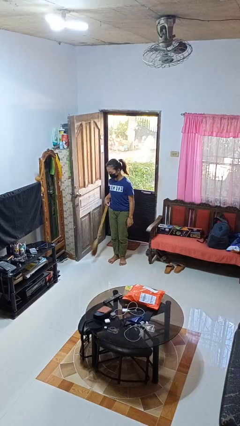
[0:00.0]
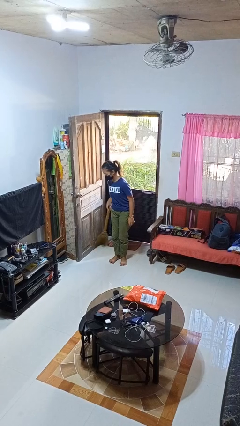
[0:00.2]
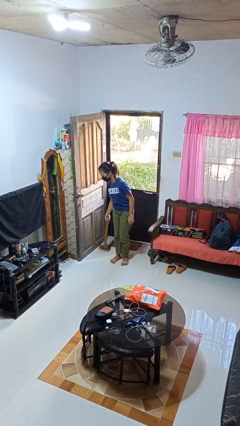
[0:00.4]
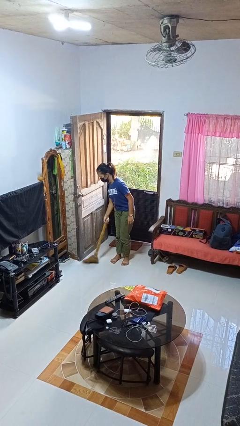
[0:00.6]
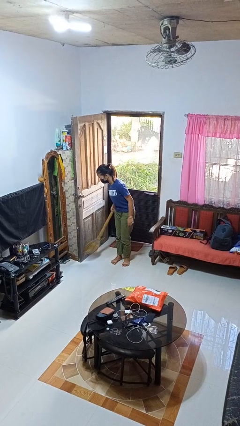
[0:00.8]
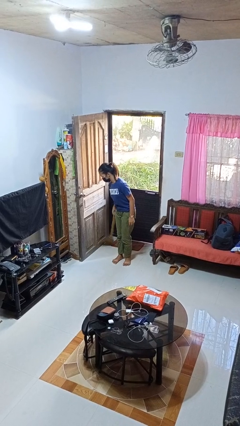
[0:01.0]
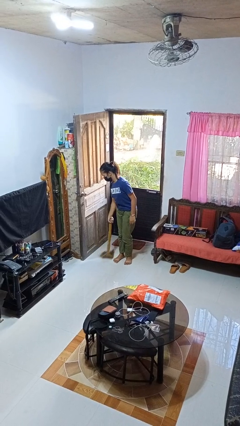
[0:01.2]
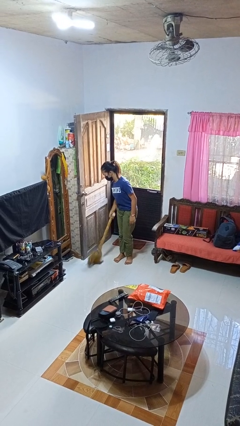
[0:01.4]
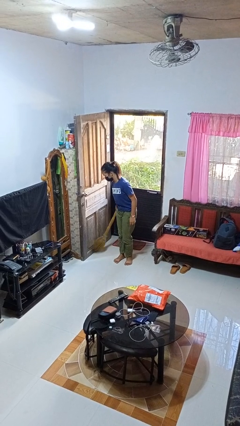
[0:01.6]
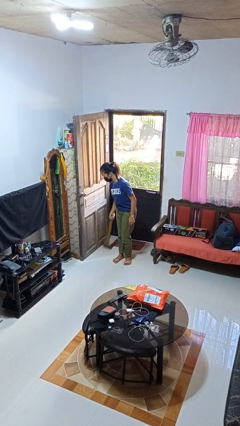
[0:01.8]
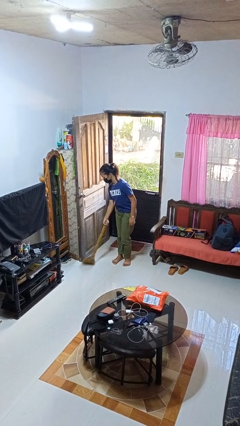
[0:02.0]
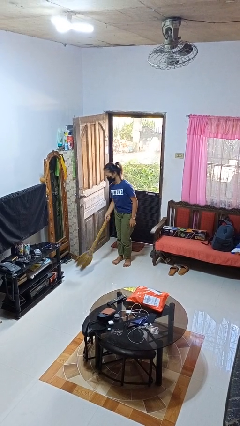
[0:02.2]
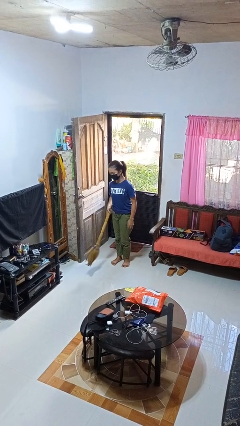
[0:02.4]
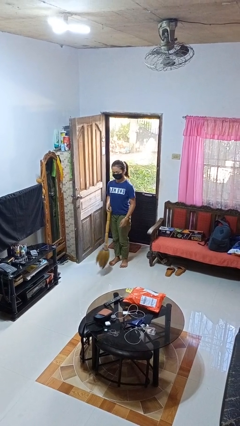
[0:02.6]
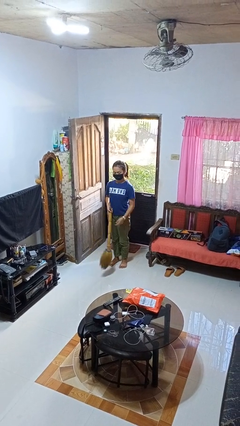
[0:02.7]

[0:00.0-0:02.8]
person sweeps floor

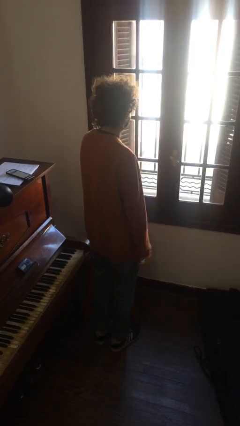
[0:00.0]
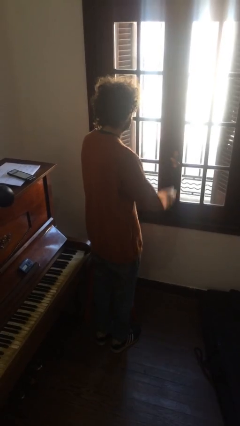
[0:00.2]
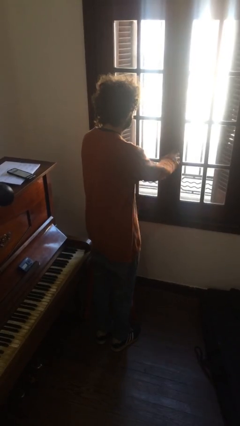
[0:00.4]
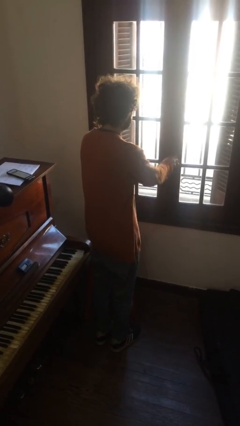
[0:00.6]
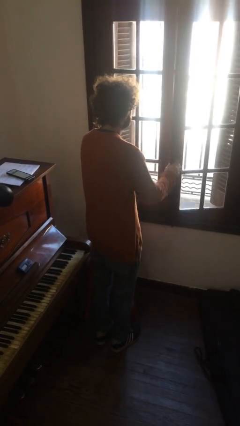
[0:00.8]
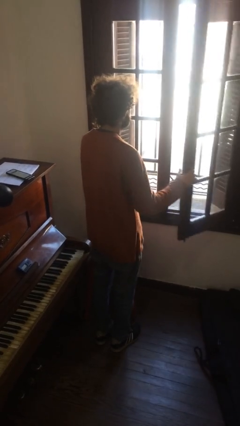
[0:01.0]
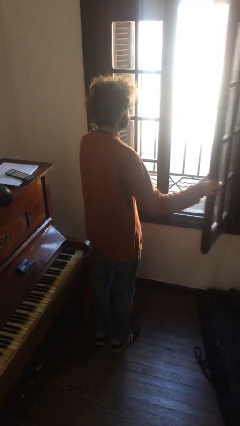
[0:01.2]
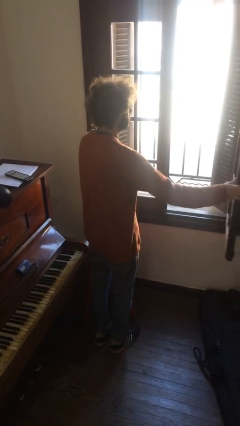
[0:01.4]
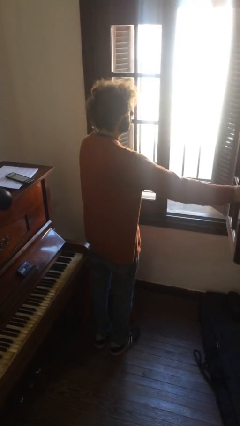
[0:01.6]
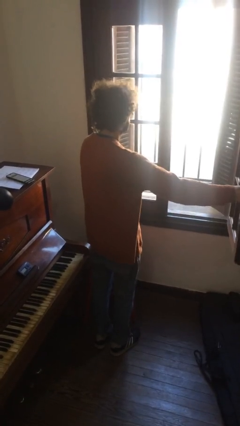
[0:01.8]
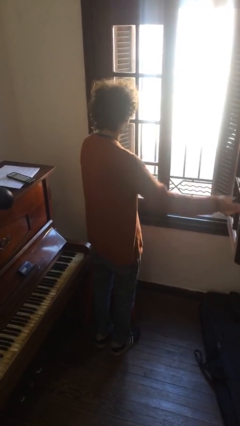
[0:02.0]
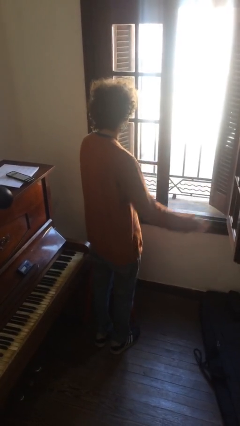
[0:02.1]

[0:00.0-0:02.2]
person opens home window

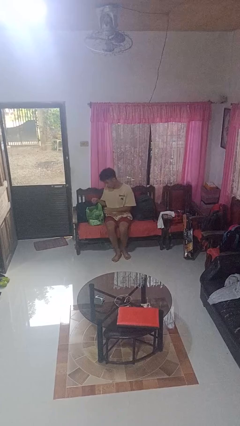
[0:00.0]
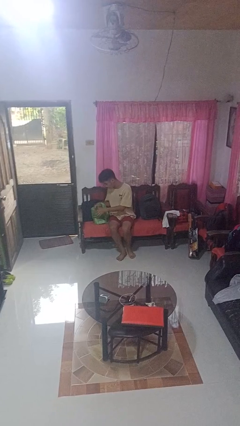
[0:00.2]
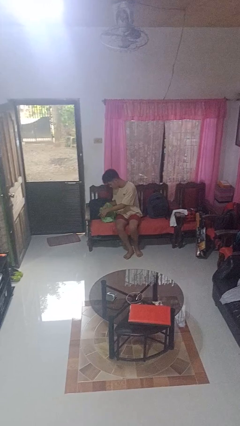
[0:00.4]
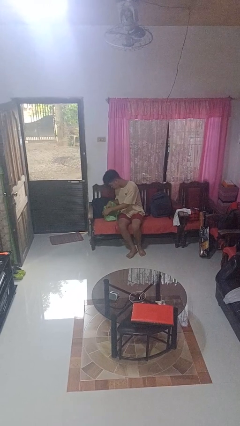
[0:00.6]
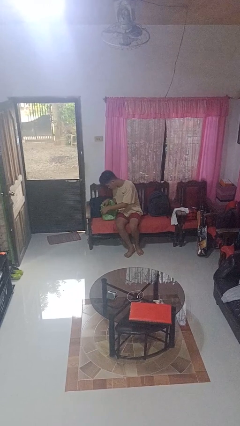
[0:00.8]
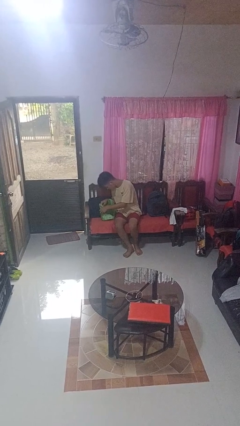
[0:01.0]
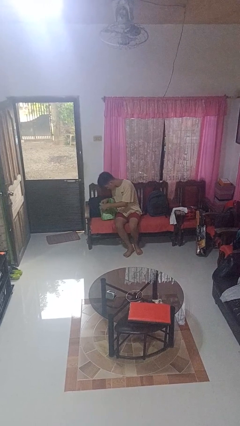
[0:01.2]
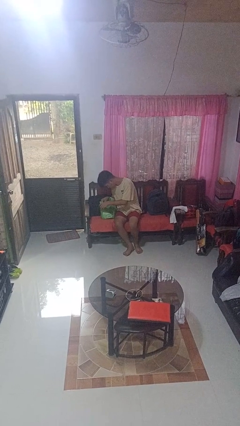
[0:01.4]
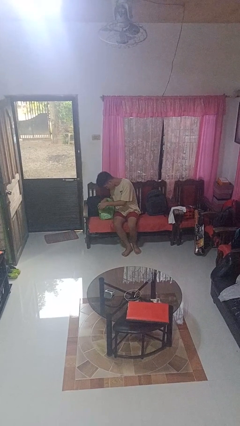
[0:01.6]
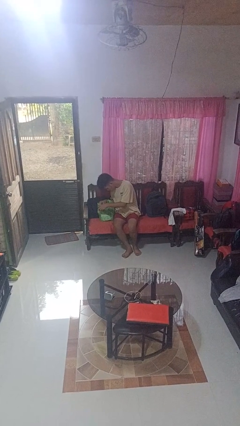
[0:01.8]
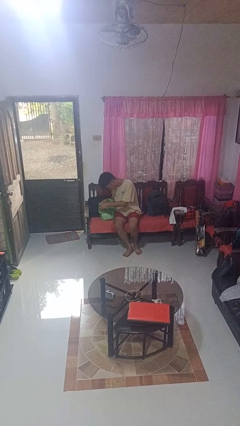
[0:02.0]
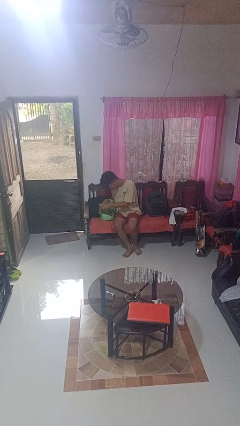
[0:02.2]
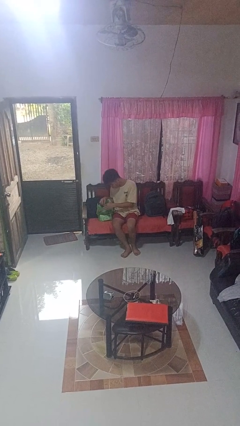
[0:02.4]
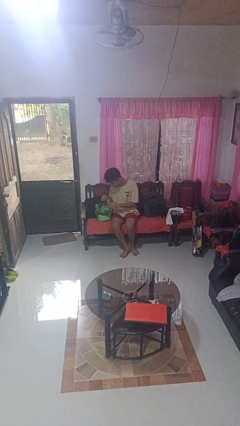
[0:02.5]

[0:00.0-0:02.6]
person searches in bag

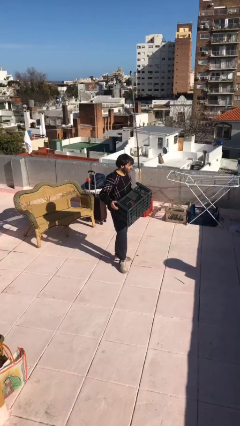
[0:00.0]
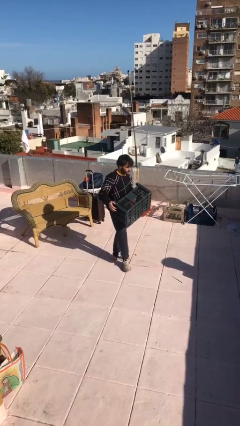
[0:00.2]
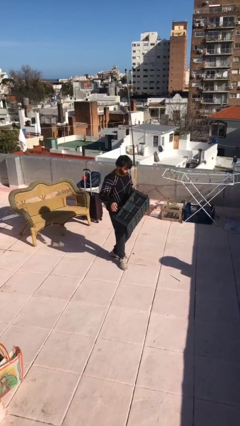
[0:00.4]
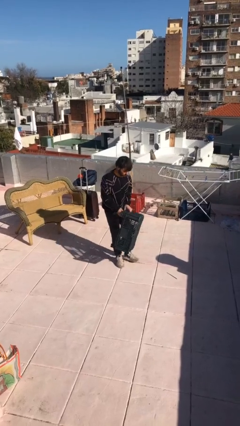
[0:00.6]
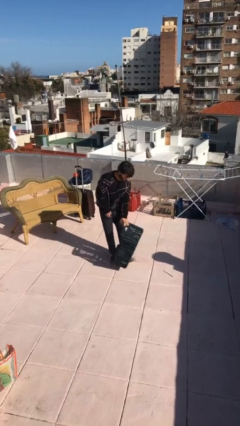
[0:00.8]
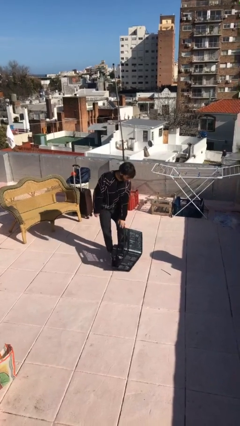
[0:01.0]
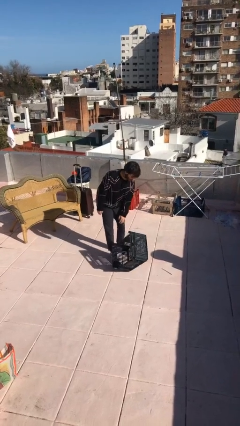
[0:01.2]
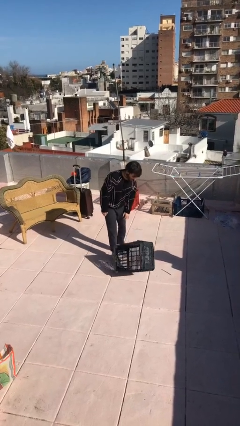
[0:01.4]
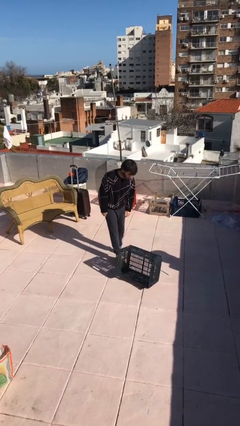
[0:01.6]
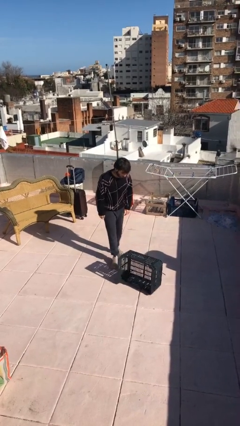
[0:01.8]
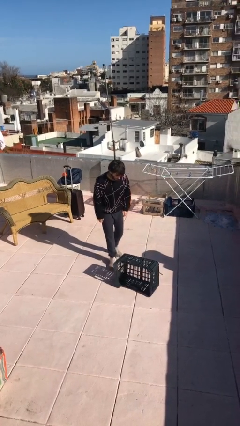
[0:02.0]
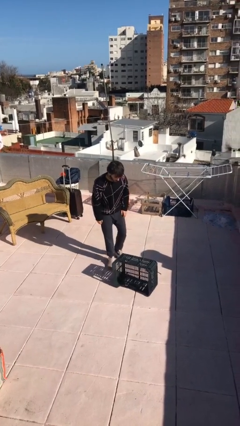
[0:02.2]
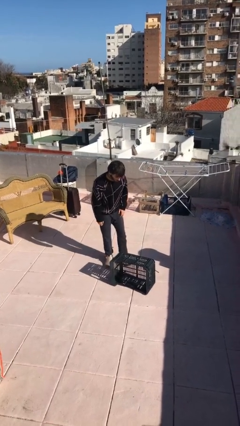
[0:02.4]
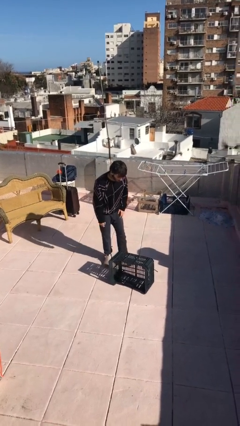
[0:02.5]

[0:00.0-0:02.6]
person drops object

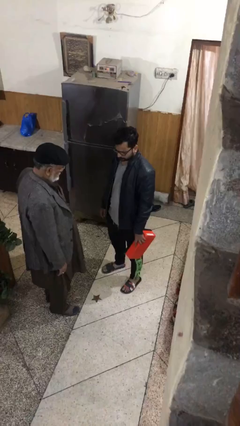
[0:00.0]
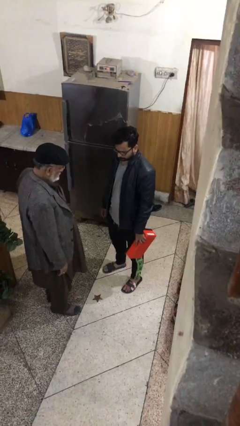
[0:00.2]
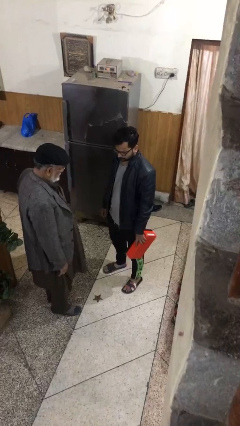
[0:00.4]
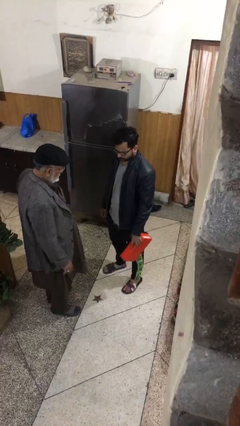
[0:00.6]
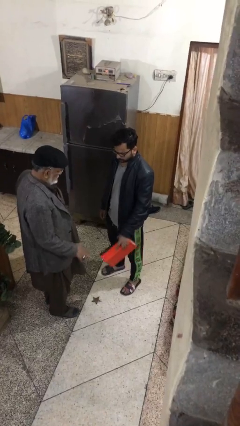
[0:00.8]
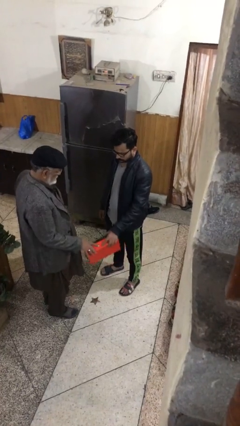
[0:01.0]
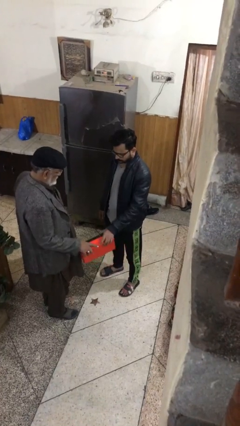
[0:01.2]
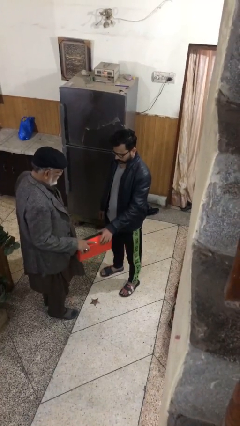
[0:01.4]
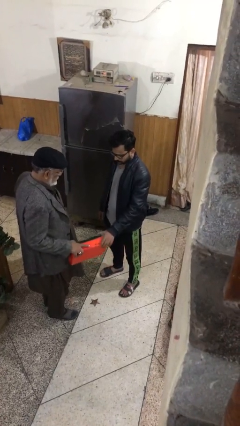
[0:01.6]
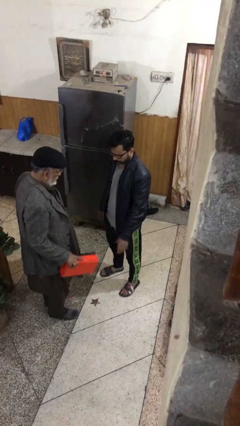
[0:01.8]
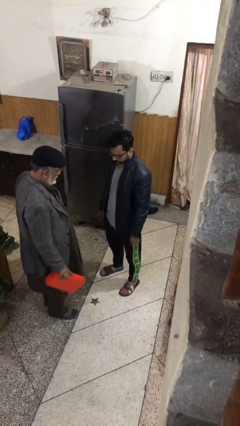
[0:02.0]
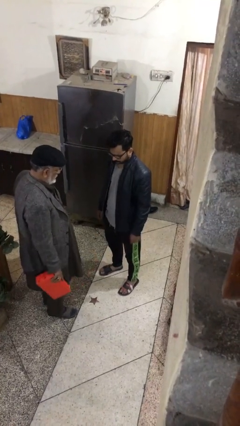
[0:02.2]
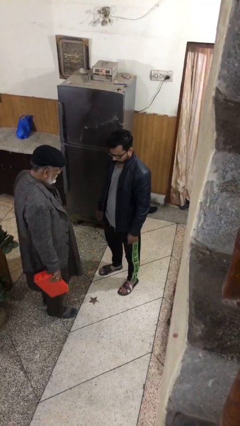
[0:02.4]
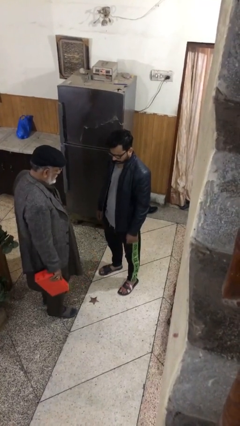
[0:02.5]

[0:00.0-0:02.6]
person transfers object to person

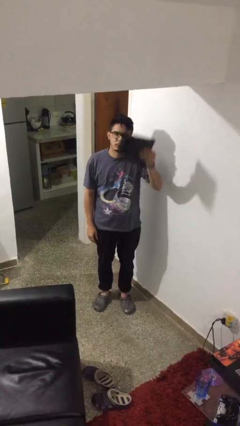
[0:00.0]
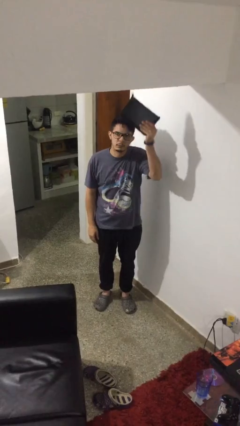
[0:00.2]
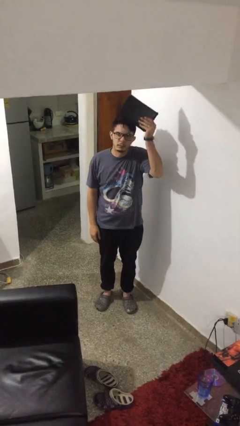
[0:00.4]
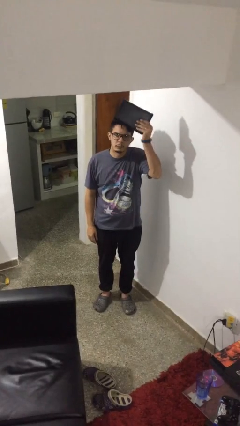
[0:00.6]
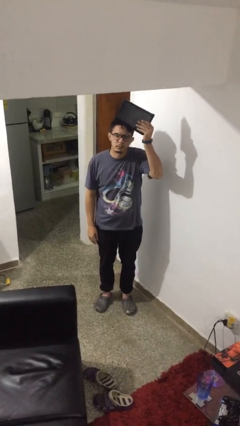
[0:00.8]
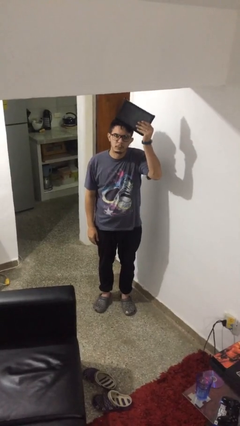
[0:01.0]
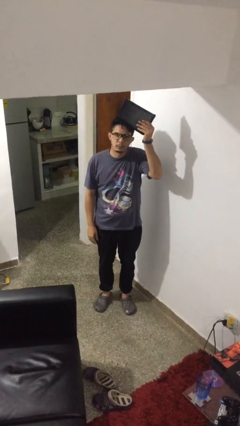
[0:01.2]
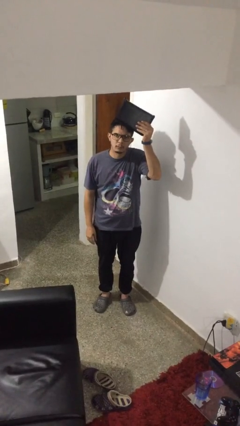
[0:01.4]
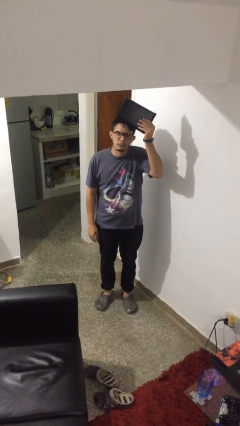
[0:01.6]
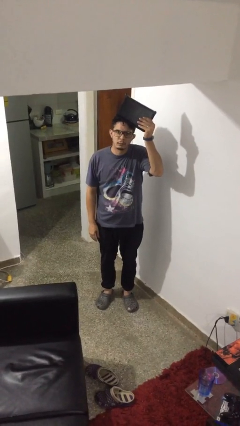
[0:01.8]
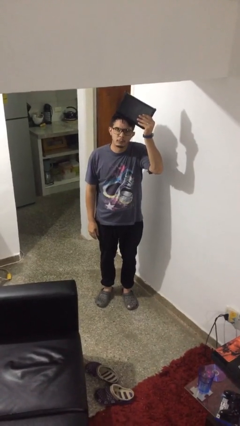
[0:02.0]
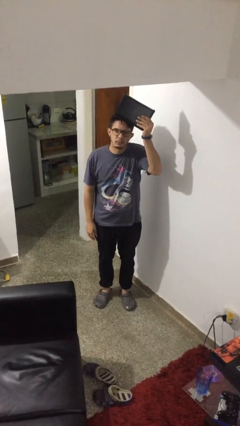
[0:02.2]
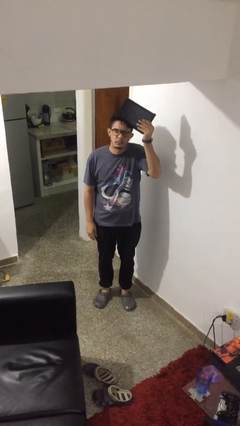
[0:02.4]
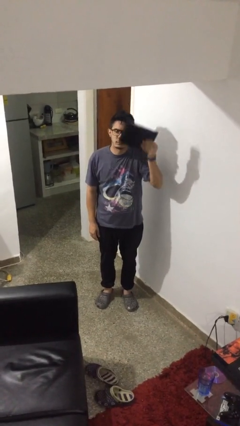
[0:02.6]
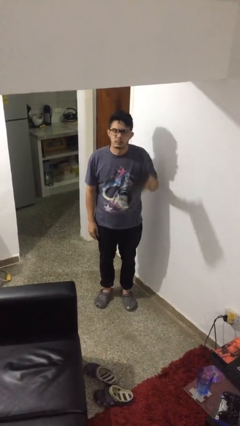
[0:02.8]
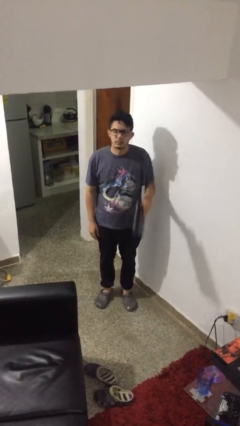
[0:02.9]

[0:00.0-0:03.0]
person holds object above head

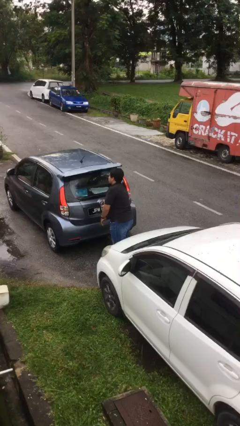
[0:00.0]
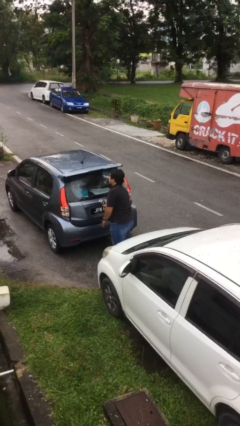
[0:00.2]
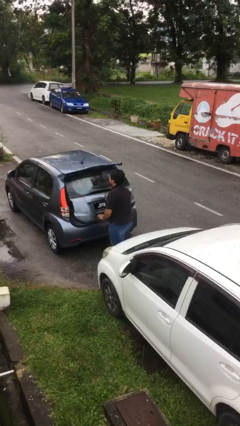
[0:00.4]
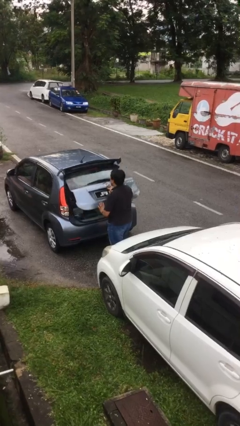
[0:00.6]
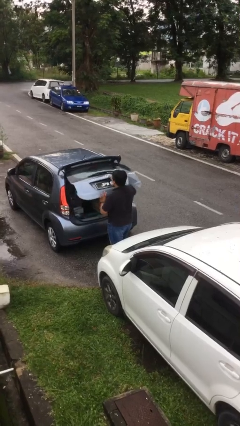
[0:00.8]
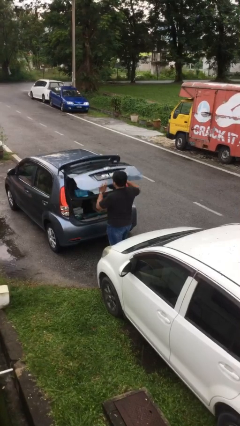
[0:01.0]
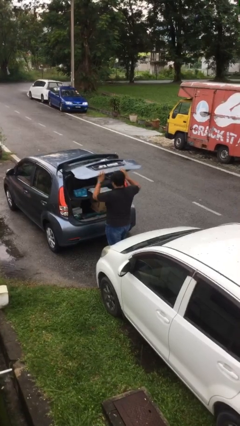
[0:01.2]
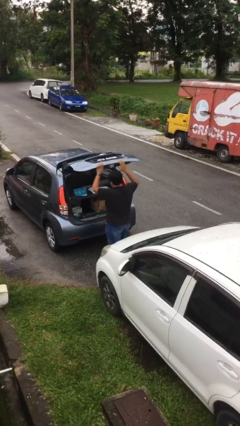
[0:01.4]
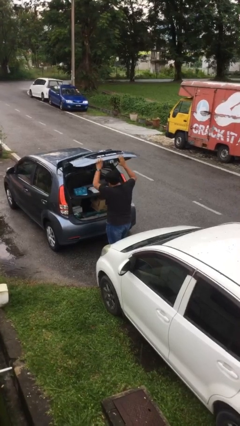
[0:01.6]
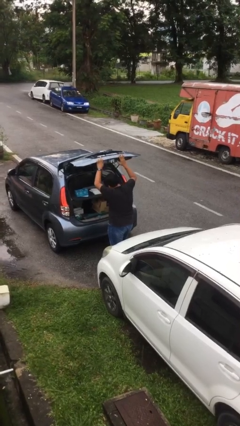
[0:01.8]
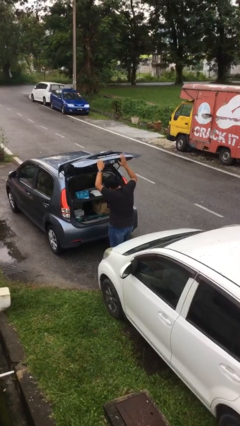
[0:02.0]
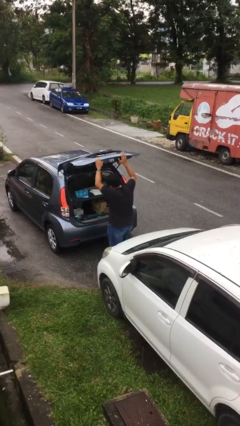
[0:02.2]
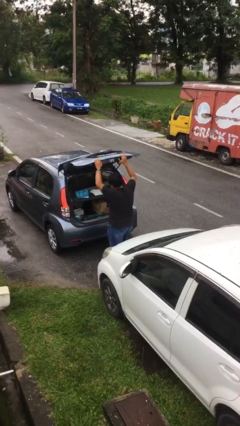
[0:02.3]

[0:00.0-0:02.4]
person opens car trunk
